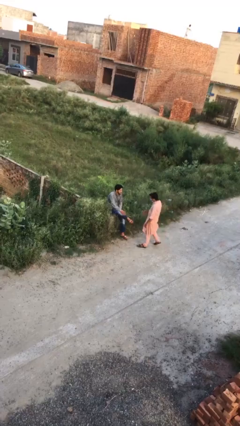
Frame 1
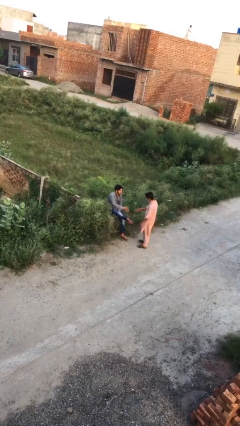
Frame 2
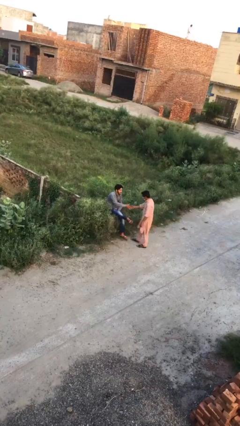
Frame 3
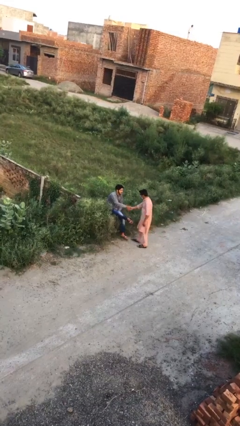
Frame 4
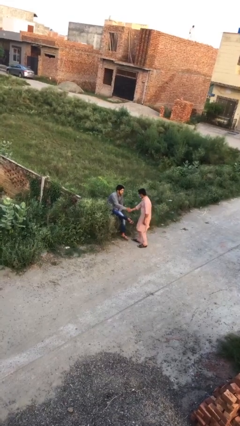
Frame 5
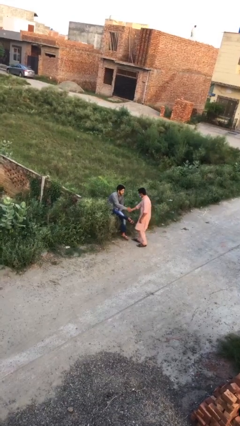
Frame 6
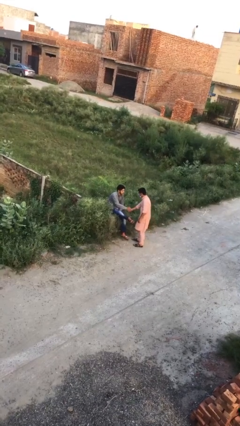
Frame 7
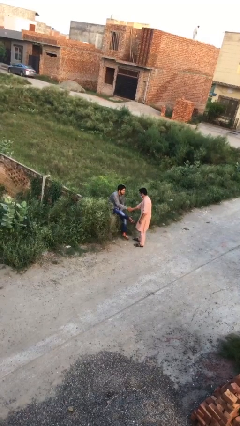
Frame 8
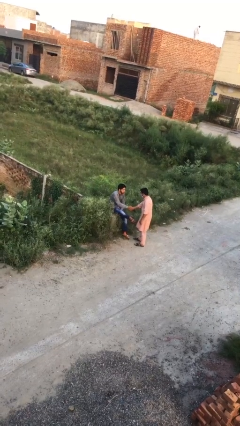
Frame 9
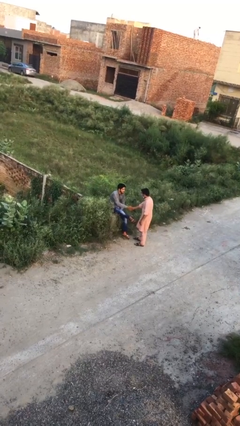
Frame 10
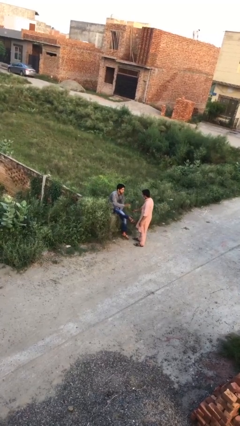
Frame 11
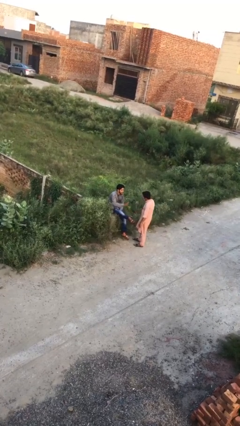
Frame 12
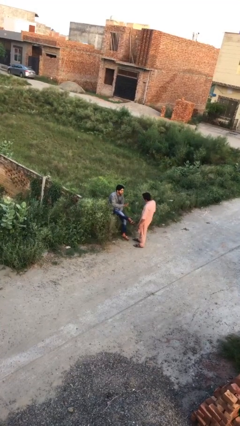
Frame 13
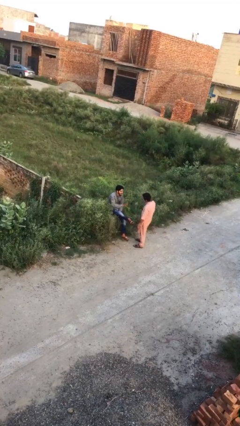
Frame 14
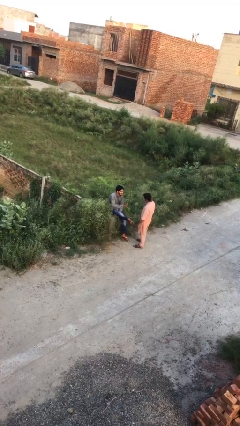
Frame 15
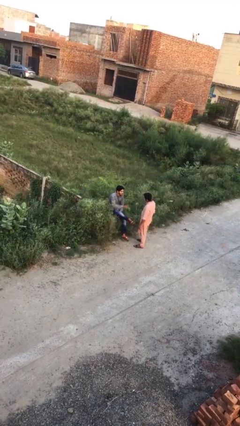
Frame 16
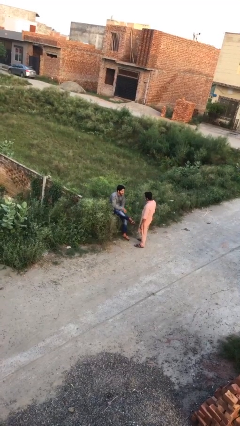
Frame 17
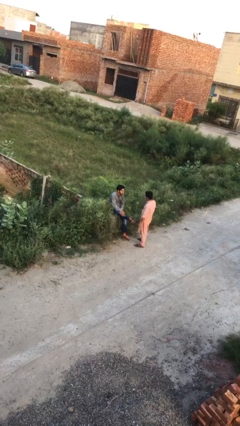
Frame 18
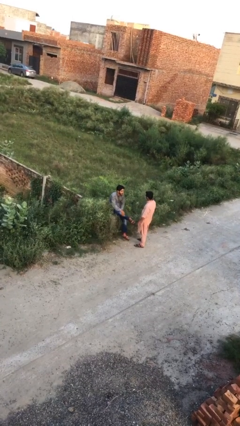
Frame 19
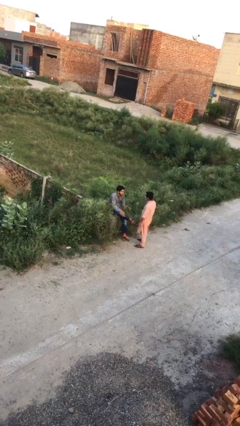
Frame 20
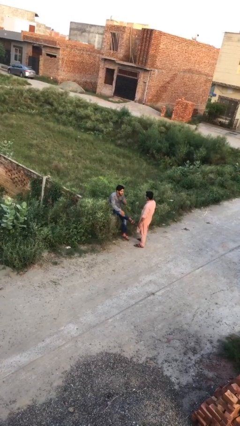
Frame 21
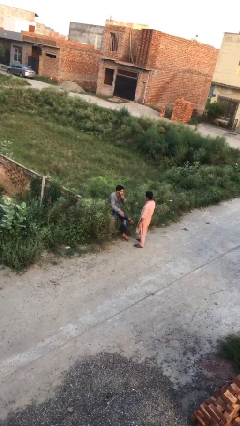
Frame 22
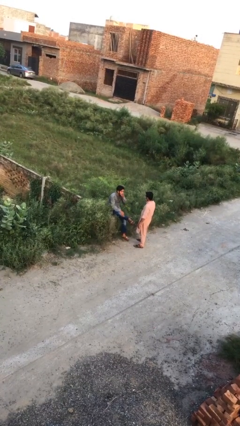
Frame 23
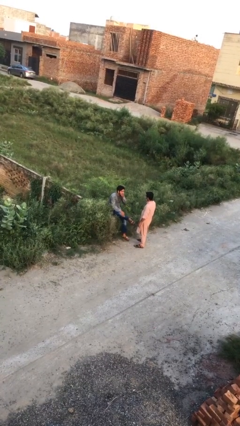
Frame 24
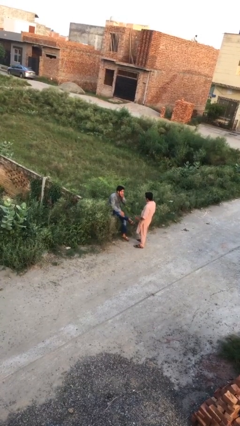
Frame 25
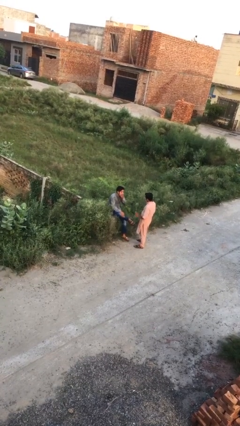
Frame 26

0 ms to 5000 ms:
person shakes hand

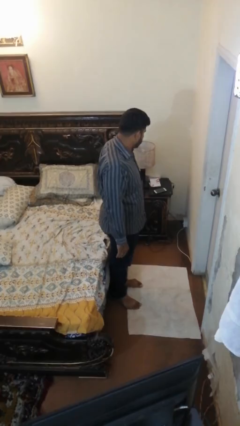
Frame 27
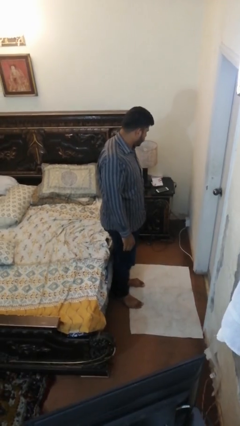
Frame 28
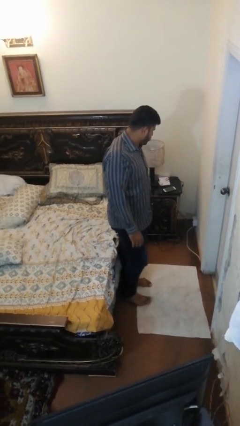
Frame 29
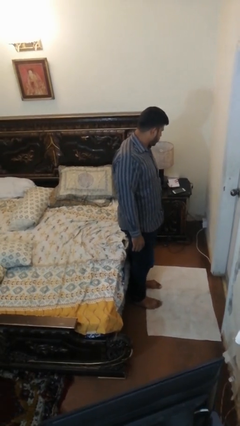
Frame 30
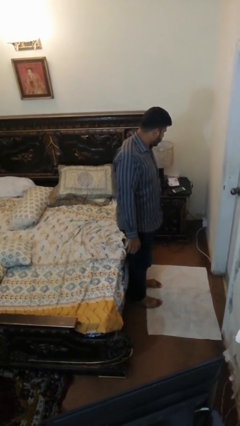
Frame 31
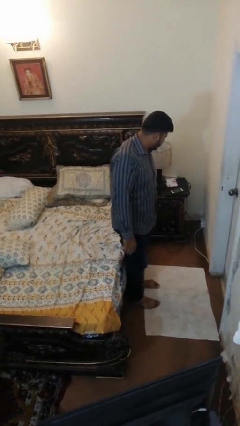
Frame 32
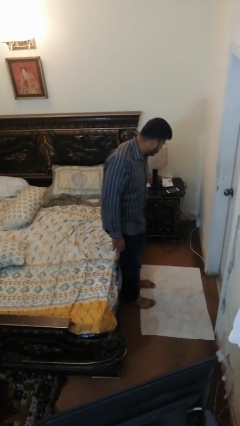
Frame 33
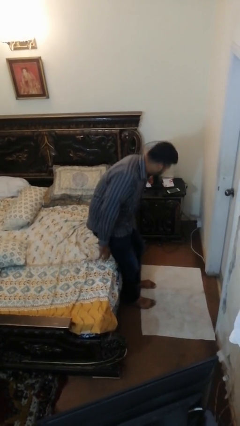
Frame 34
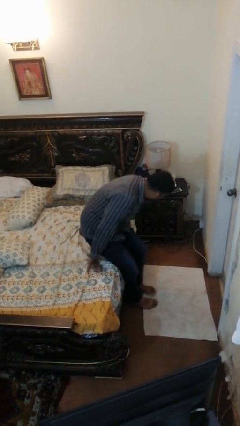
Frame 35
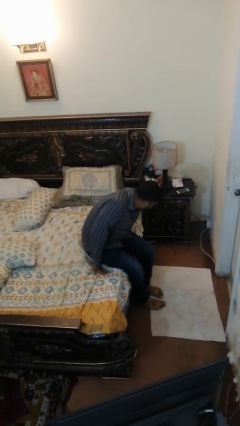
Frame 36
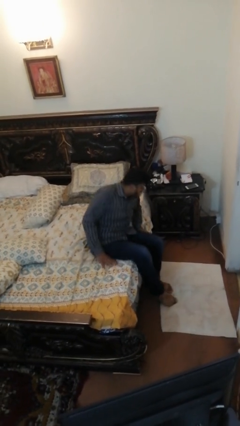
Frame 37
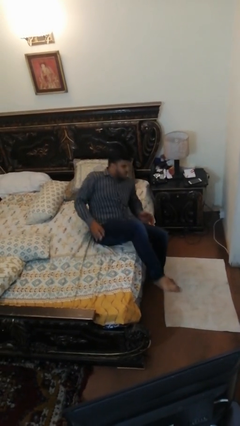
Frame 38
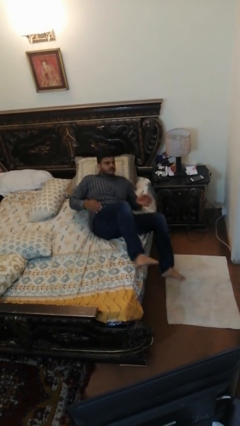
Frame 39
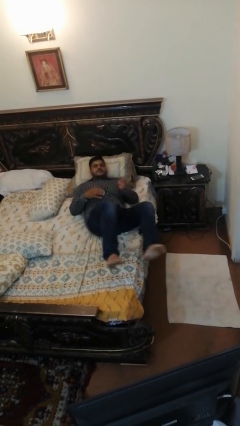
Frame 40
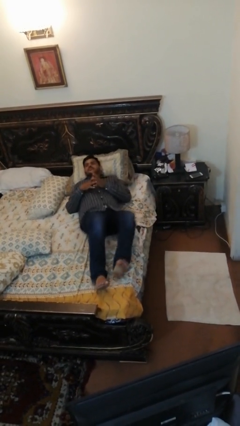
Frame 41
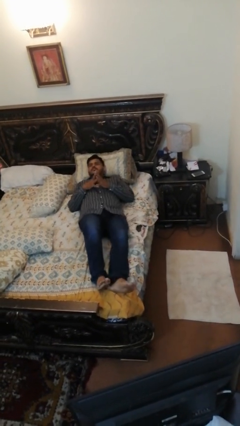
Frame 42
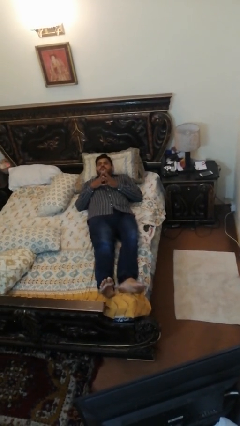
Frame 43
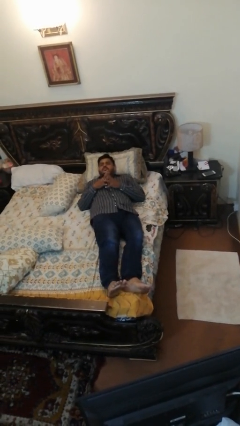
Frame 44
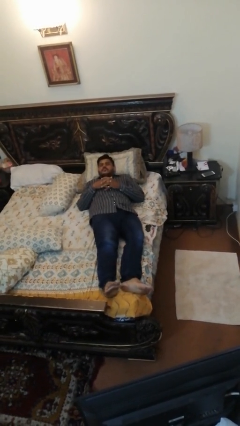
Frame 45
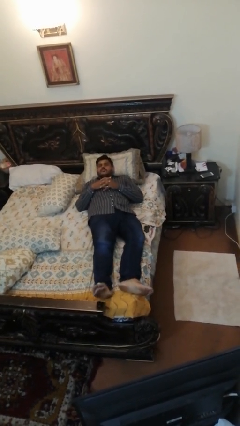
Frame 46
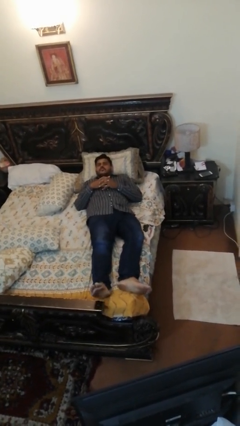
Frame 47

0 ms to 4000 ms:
person lies down on bed

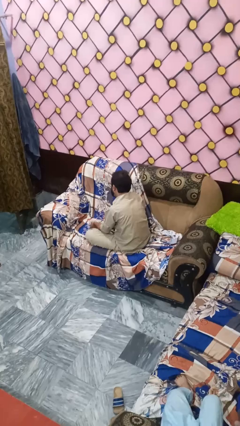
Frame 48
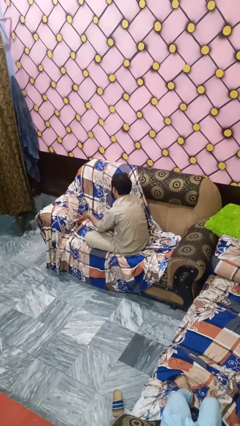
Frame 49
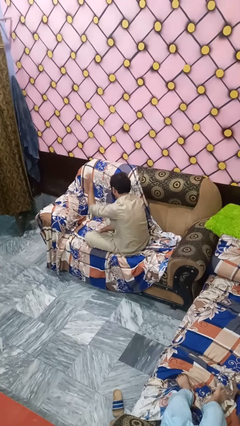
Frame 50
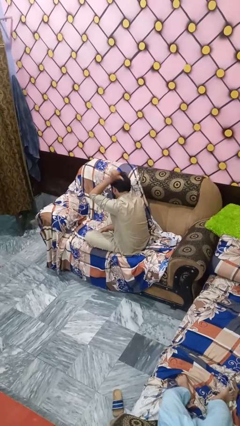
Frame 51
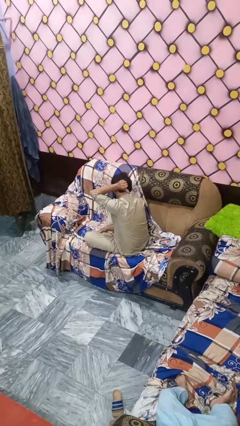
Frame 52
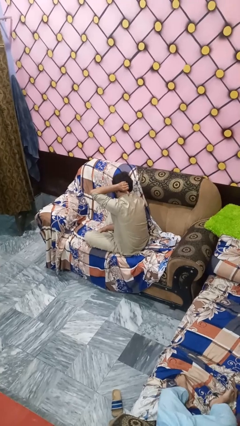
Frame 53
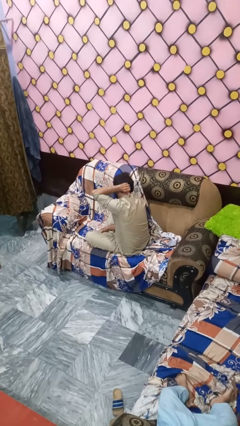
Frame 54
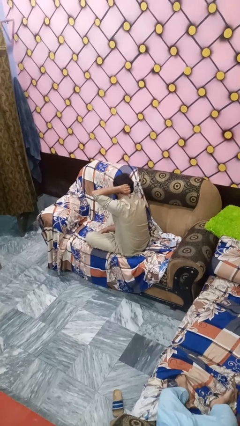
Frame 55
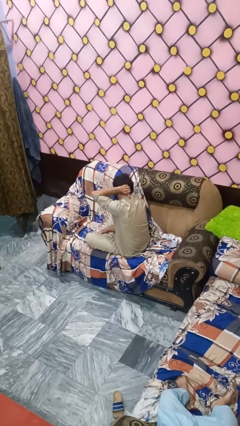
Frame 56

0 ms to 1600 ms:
person gestures behind me

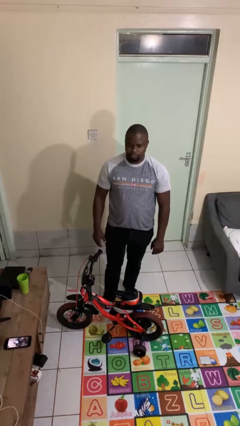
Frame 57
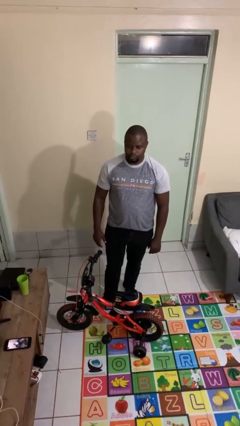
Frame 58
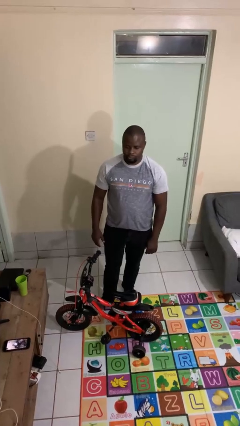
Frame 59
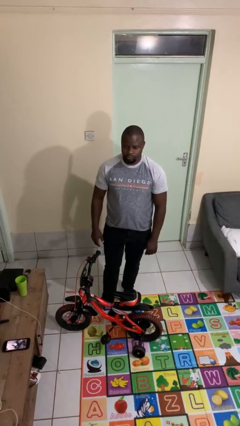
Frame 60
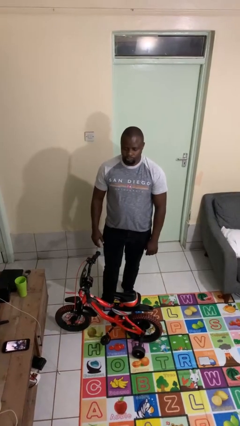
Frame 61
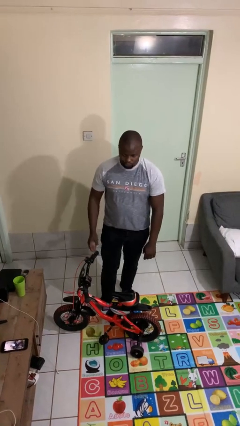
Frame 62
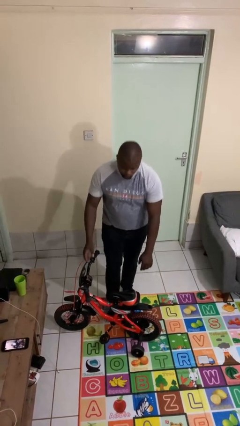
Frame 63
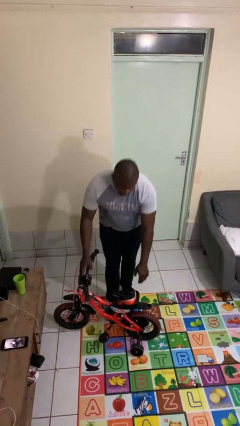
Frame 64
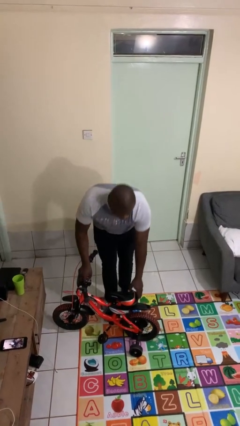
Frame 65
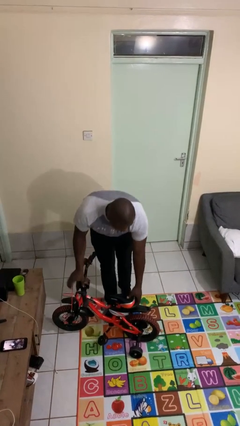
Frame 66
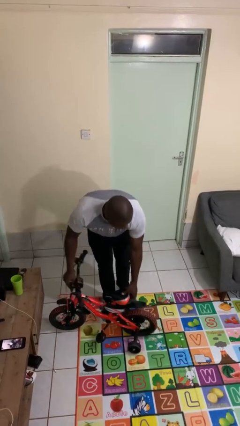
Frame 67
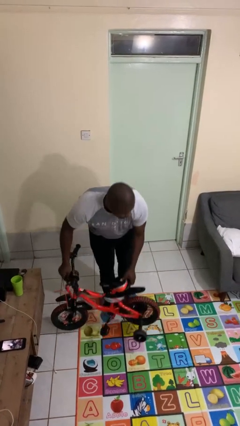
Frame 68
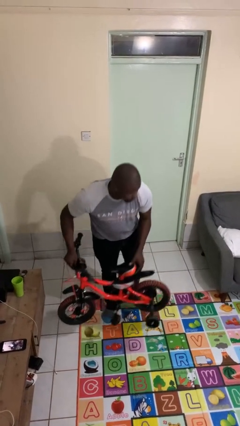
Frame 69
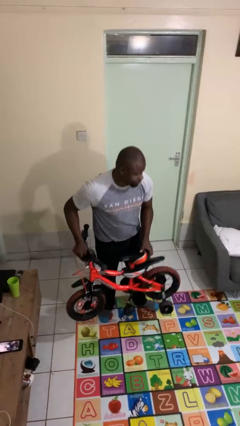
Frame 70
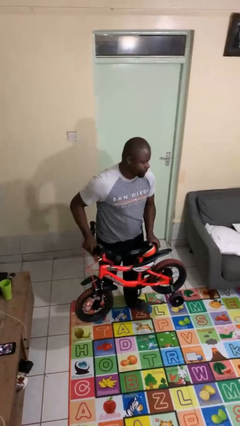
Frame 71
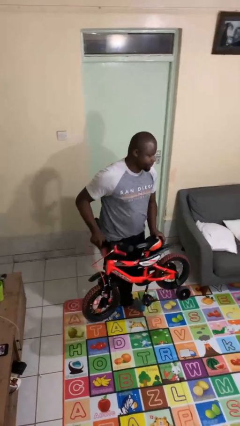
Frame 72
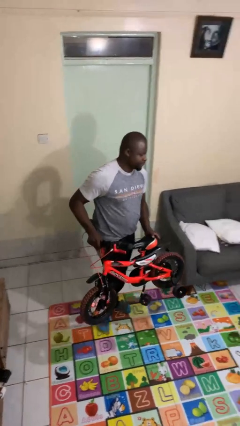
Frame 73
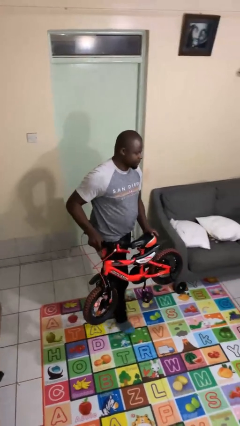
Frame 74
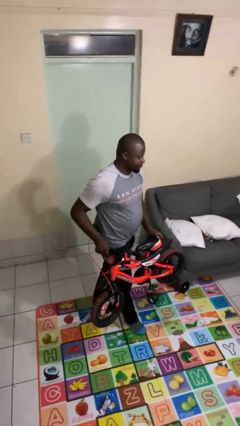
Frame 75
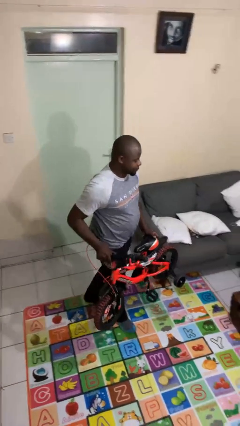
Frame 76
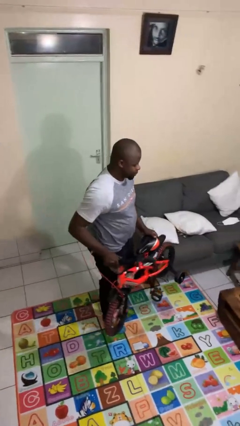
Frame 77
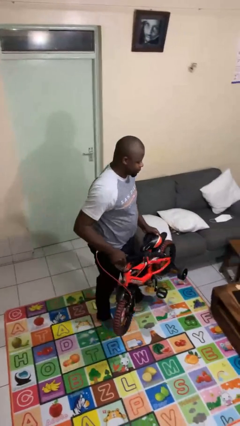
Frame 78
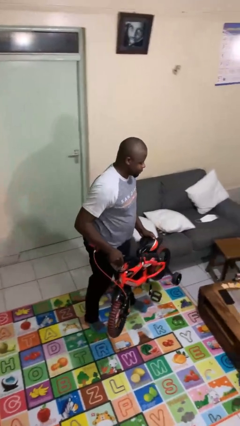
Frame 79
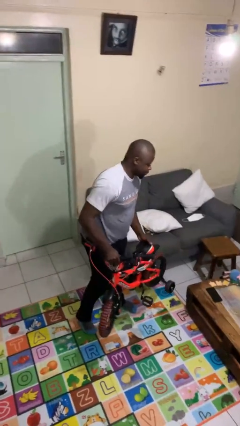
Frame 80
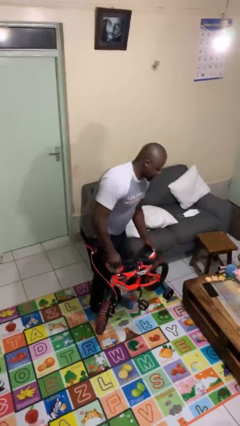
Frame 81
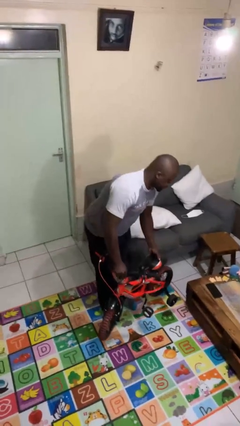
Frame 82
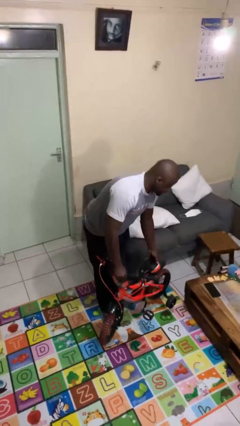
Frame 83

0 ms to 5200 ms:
person carries bicycle

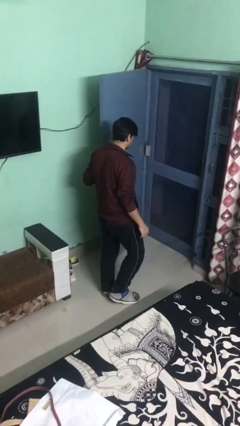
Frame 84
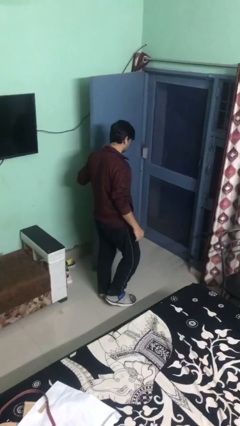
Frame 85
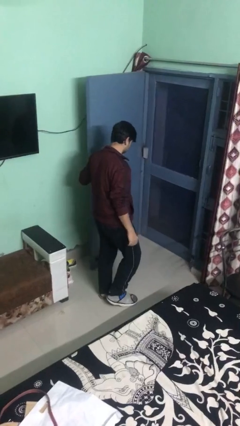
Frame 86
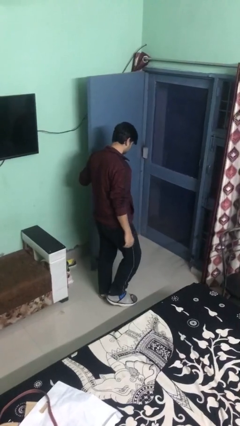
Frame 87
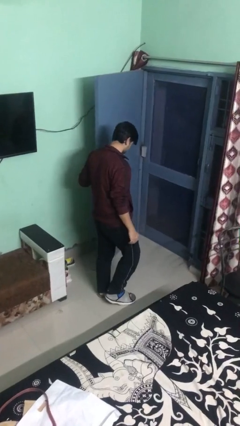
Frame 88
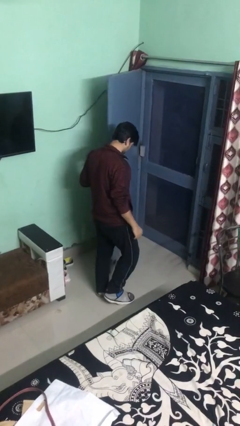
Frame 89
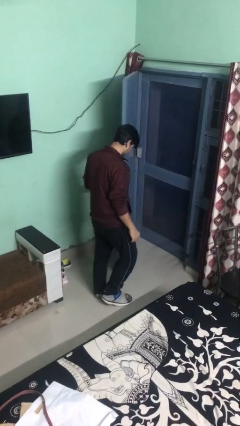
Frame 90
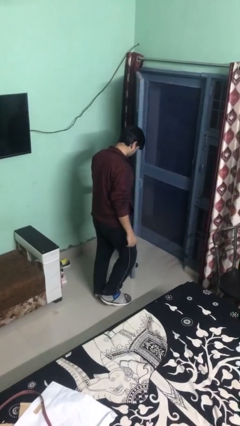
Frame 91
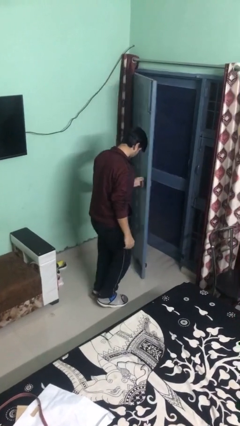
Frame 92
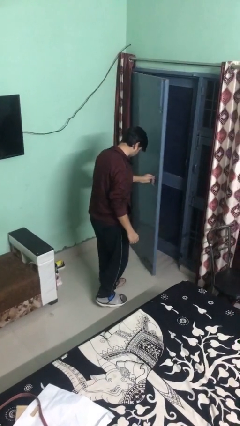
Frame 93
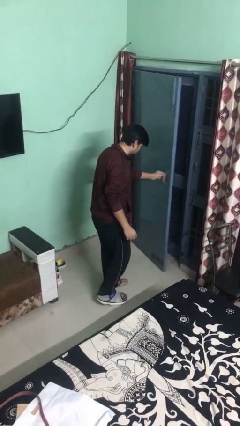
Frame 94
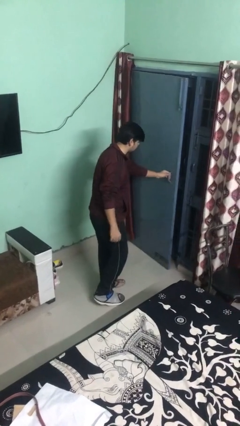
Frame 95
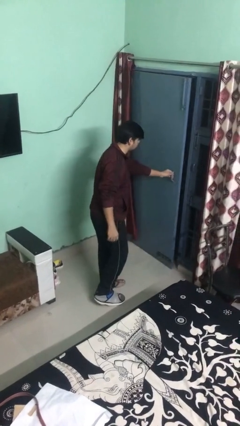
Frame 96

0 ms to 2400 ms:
person closes facility door
